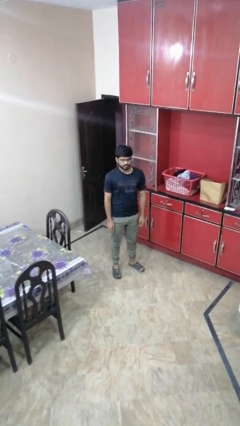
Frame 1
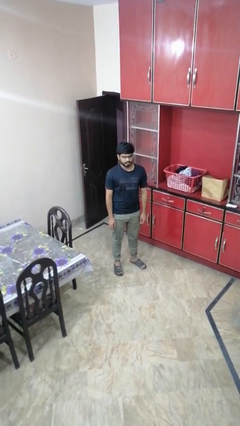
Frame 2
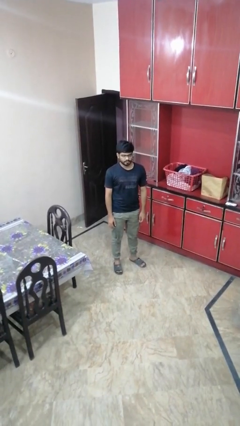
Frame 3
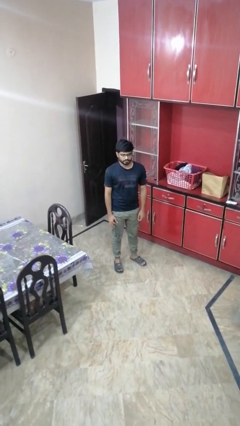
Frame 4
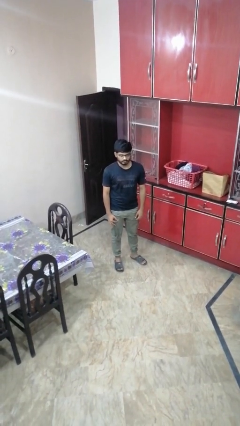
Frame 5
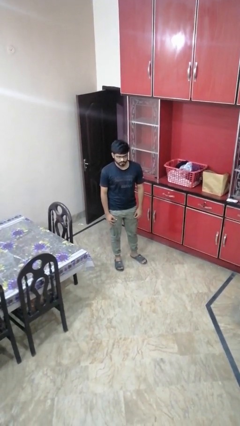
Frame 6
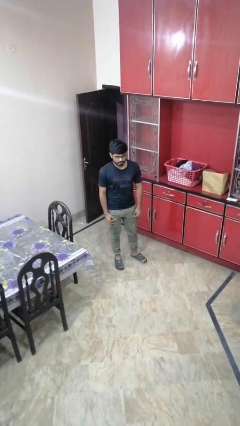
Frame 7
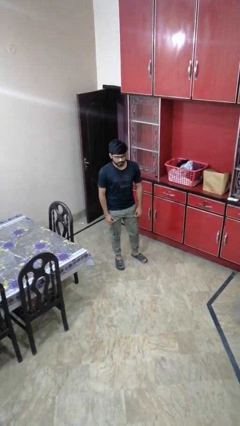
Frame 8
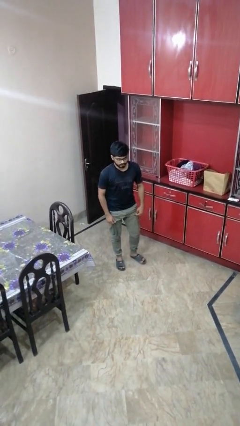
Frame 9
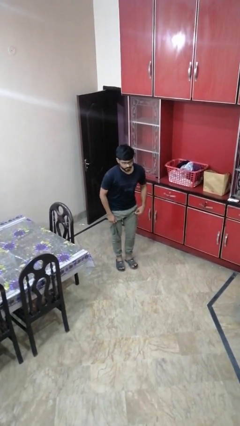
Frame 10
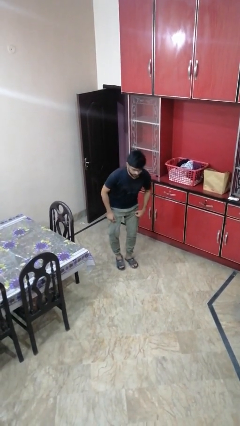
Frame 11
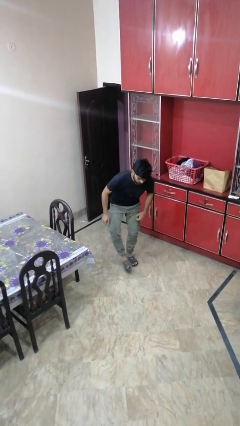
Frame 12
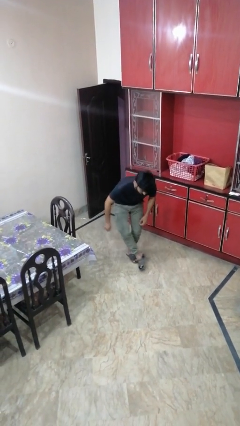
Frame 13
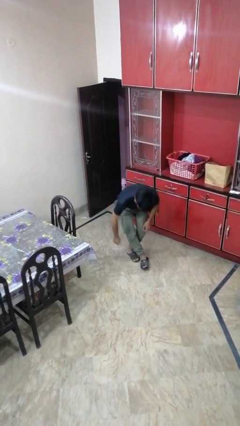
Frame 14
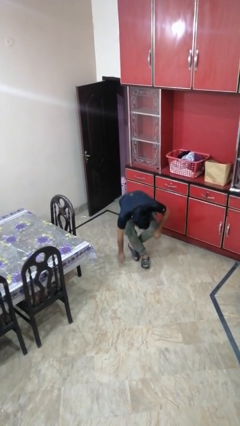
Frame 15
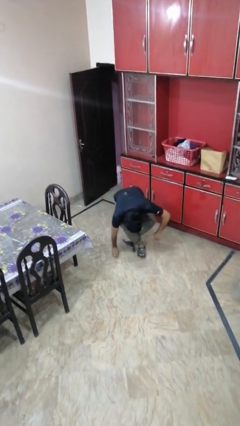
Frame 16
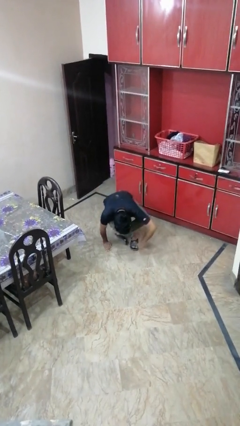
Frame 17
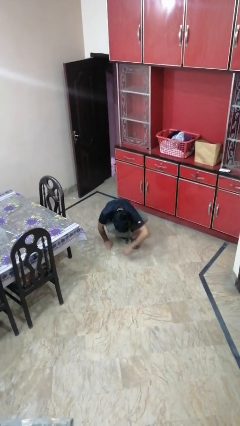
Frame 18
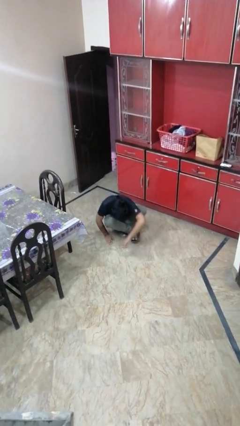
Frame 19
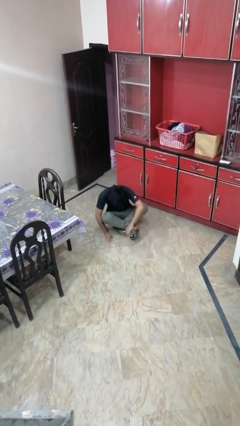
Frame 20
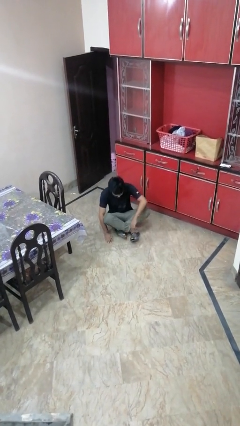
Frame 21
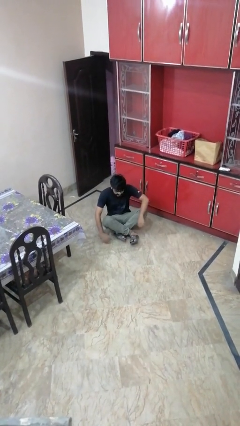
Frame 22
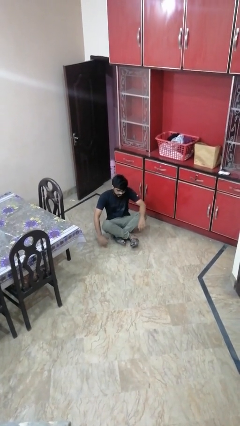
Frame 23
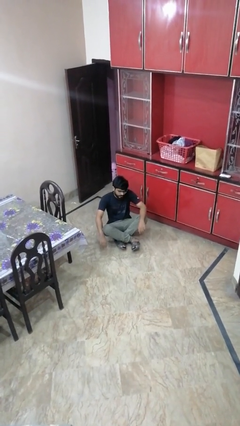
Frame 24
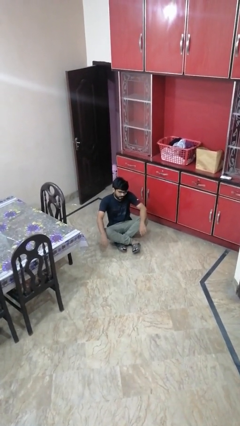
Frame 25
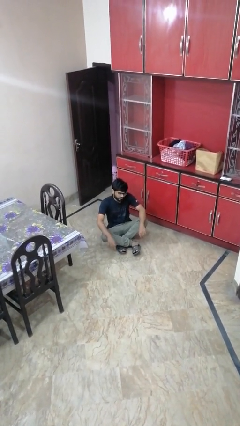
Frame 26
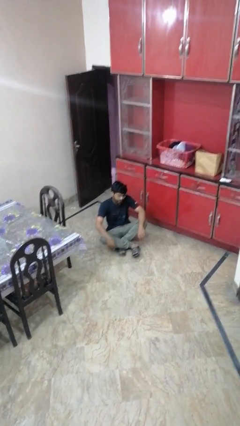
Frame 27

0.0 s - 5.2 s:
person sits crisscross

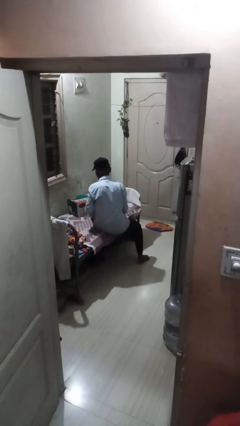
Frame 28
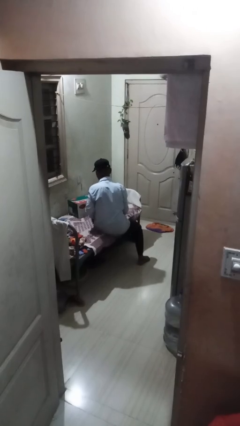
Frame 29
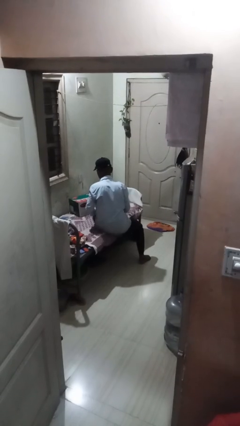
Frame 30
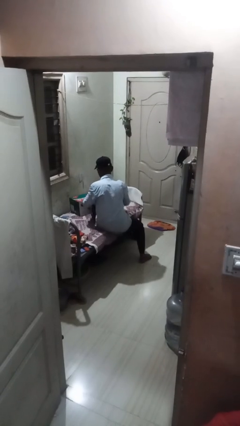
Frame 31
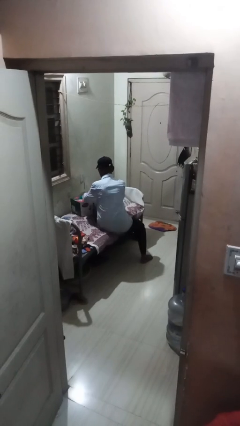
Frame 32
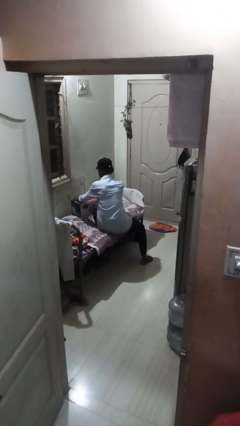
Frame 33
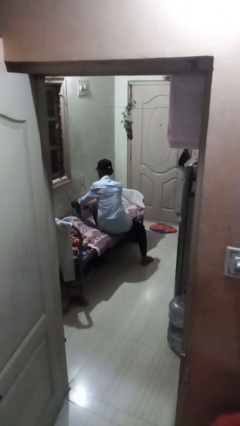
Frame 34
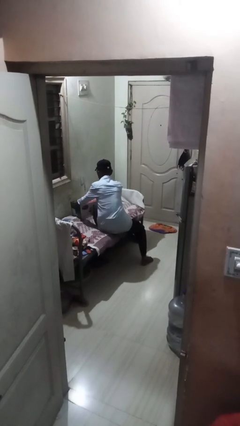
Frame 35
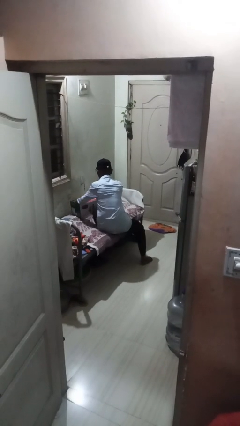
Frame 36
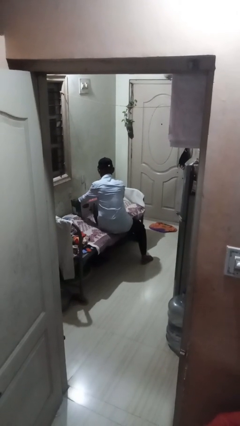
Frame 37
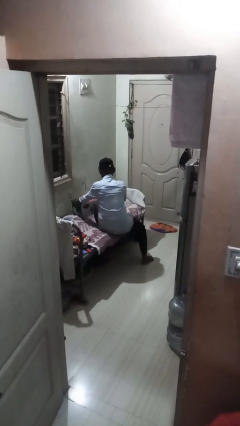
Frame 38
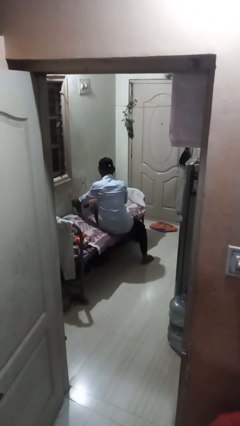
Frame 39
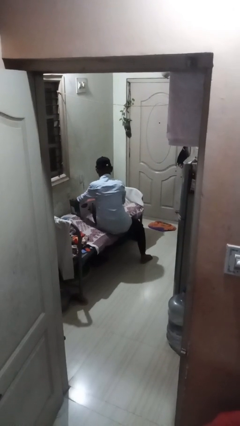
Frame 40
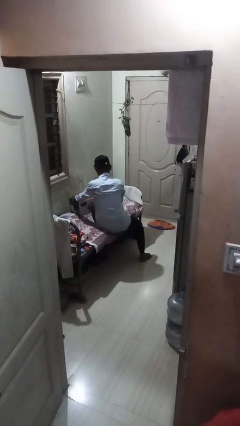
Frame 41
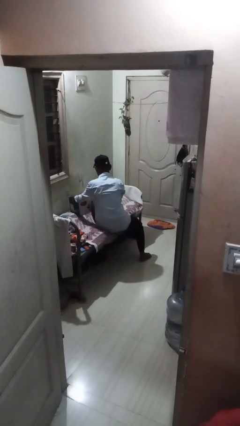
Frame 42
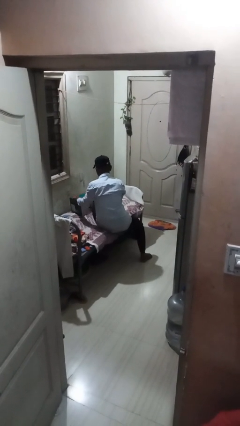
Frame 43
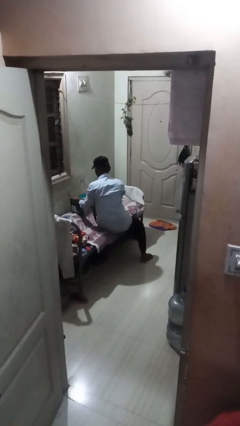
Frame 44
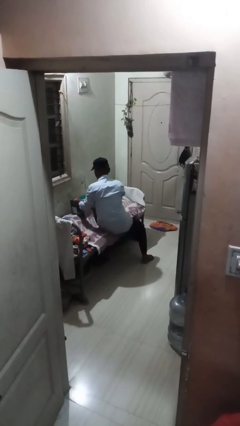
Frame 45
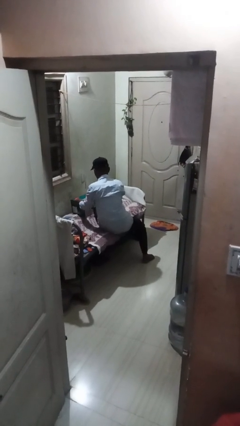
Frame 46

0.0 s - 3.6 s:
person wraps box

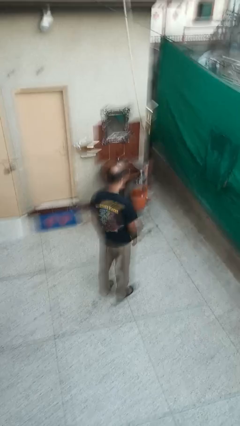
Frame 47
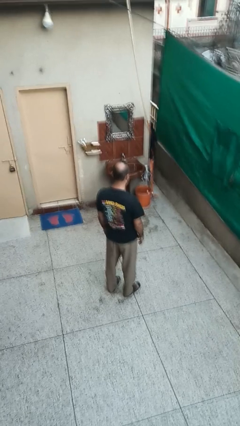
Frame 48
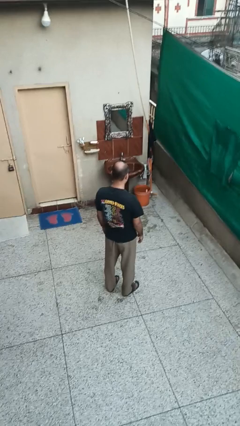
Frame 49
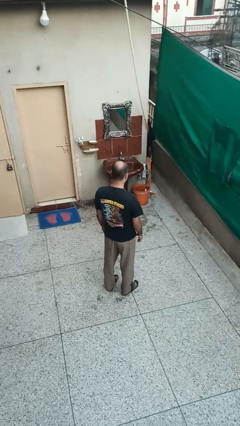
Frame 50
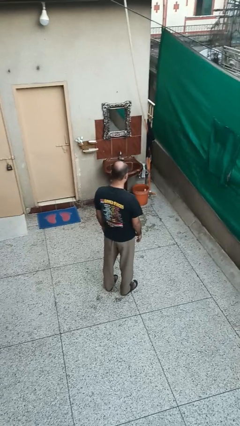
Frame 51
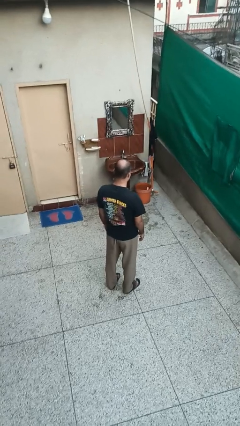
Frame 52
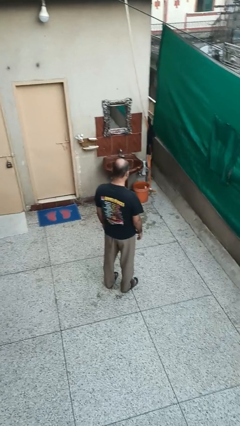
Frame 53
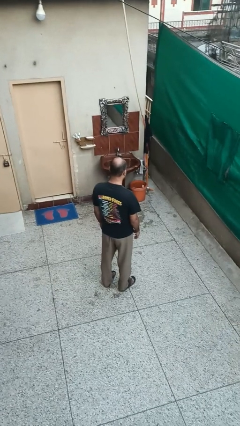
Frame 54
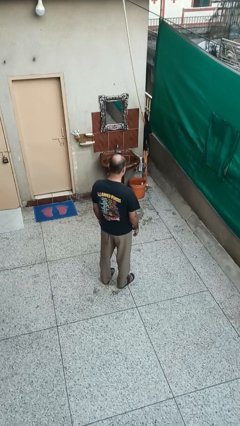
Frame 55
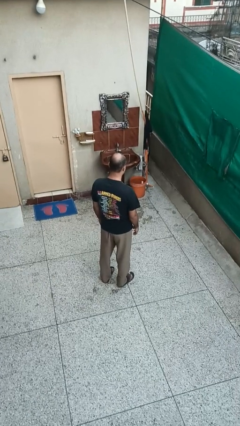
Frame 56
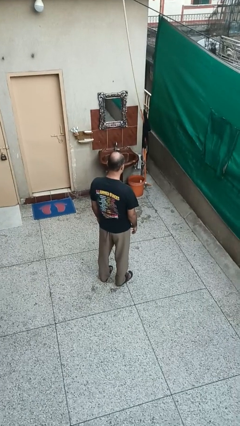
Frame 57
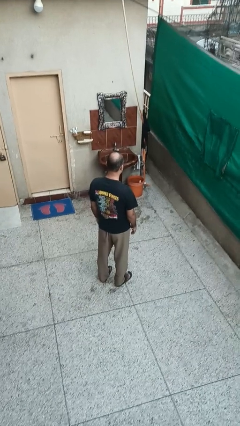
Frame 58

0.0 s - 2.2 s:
person gestures lower hand

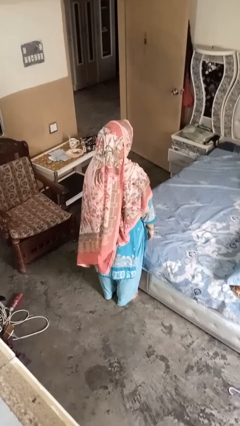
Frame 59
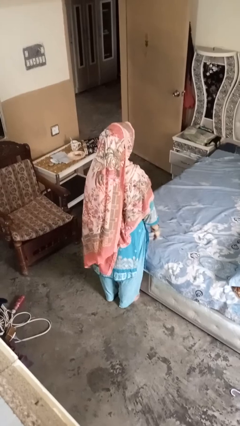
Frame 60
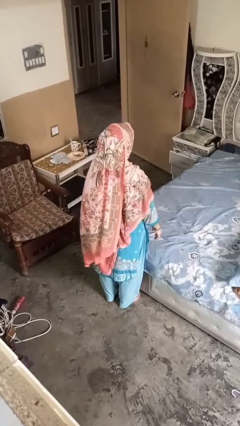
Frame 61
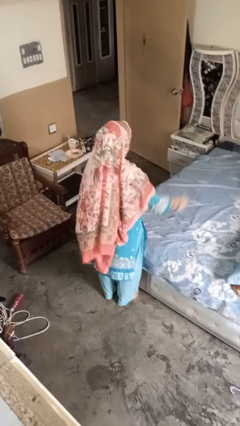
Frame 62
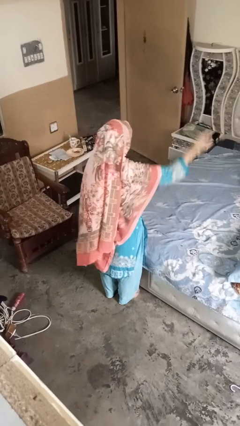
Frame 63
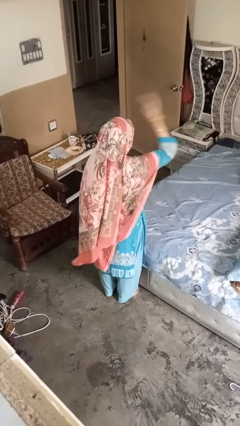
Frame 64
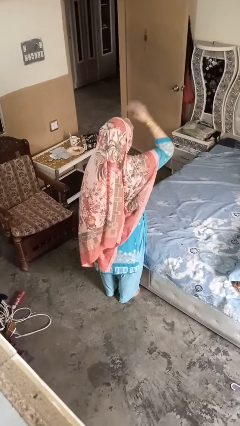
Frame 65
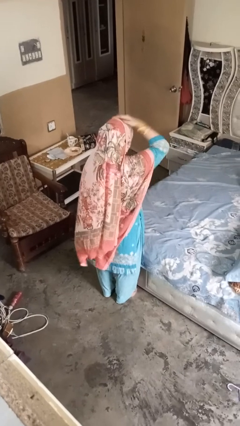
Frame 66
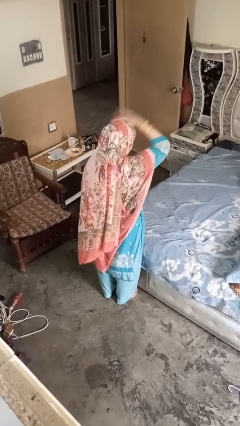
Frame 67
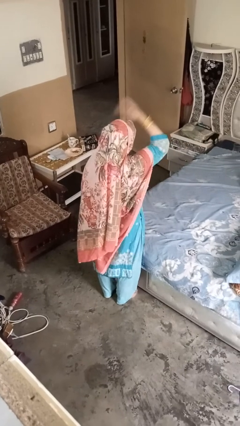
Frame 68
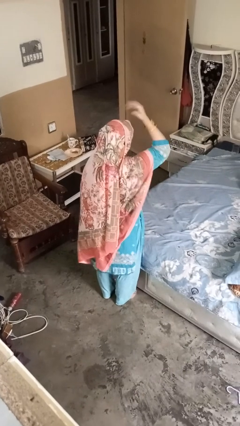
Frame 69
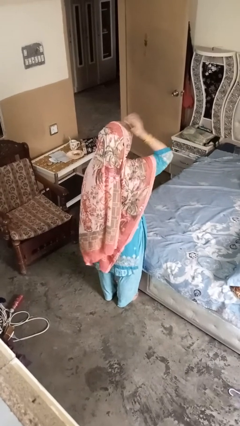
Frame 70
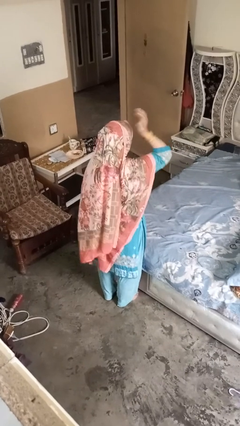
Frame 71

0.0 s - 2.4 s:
person pats head

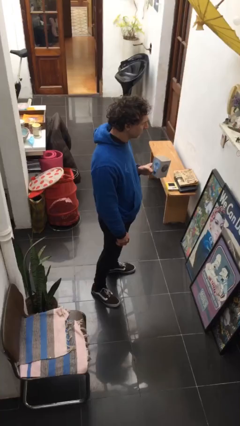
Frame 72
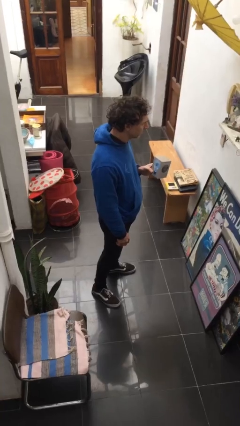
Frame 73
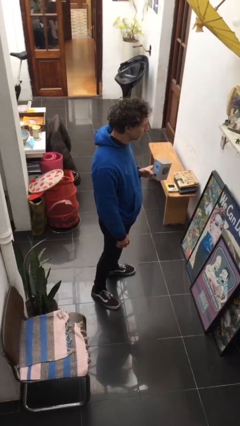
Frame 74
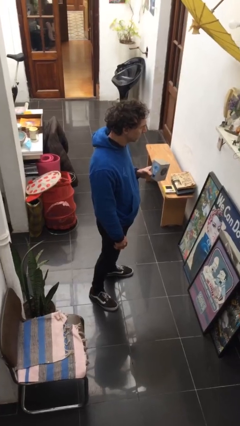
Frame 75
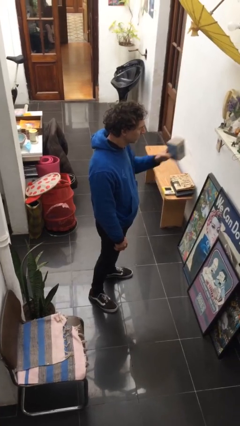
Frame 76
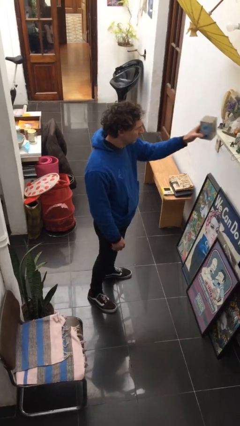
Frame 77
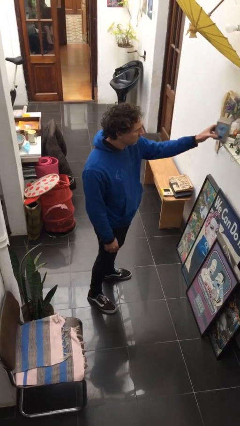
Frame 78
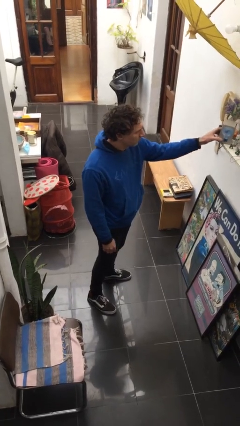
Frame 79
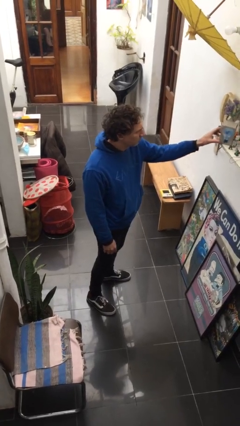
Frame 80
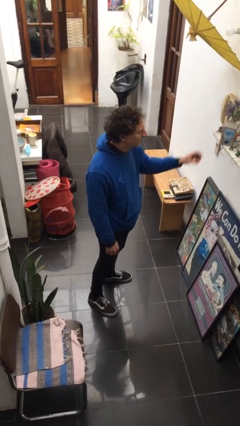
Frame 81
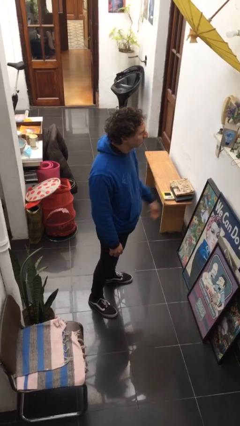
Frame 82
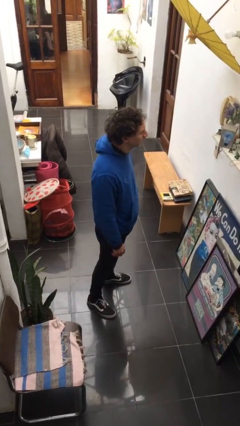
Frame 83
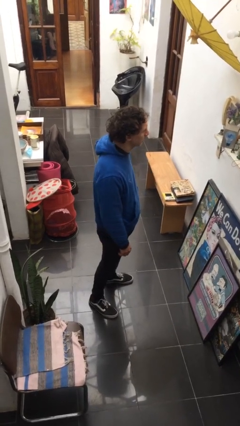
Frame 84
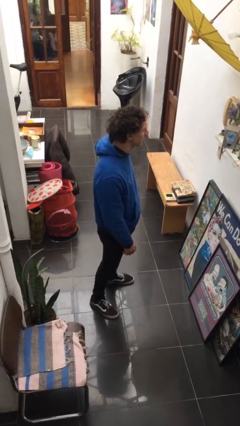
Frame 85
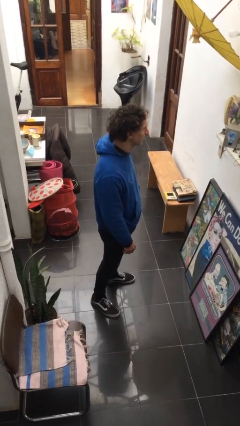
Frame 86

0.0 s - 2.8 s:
person puts down object on countertop

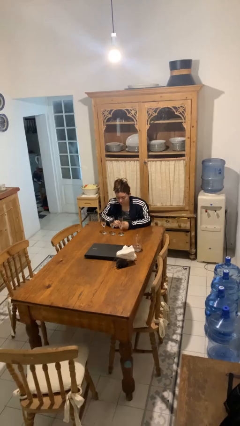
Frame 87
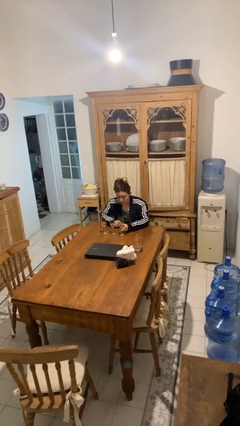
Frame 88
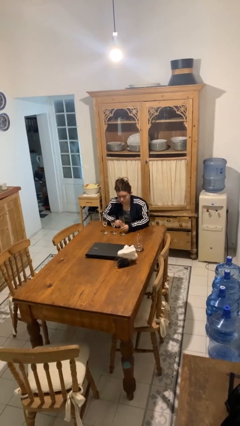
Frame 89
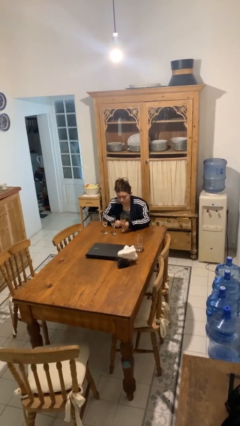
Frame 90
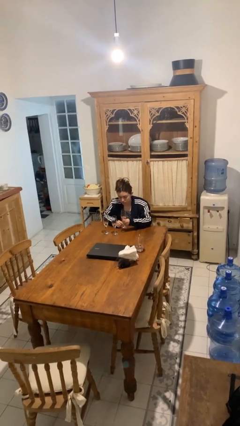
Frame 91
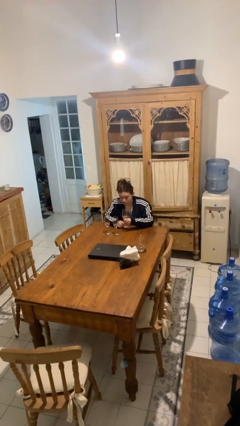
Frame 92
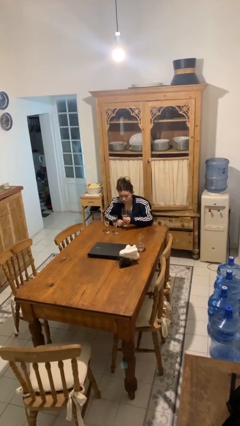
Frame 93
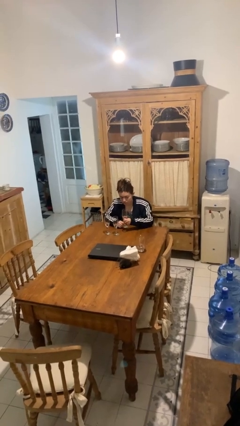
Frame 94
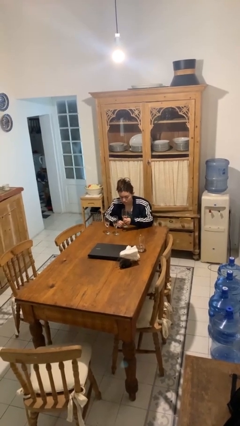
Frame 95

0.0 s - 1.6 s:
person picks up object from table
